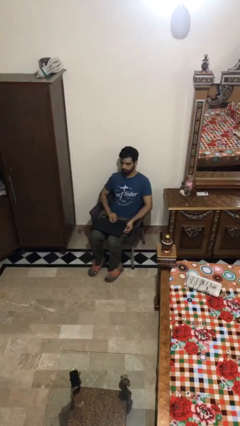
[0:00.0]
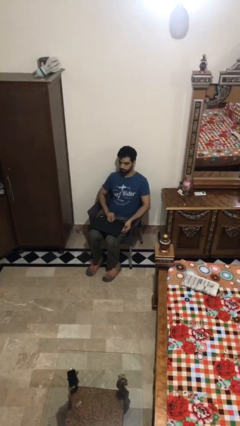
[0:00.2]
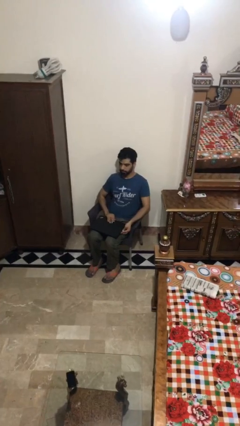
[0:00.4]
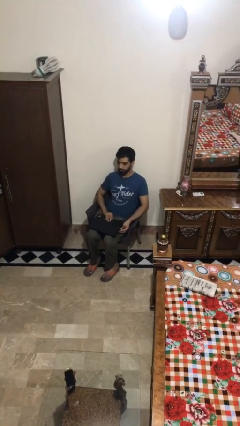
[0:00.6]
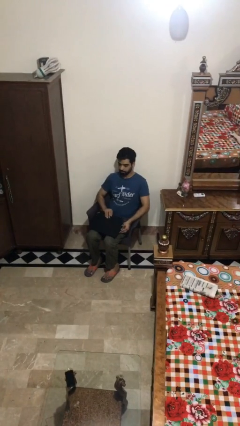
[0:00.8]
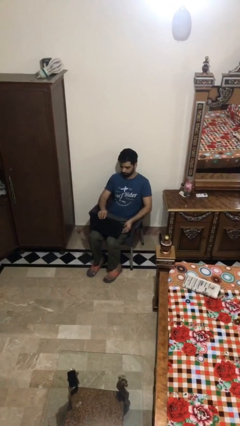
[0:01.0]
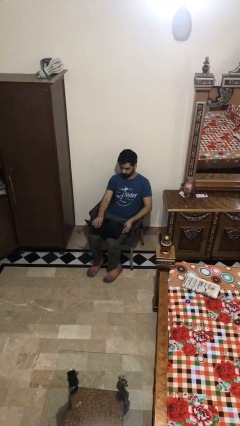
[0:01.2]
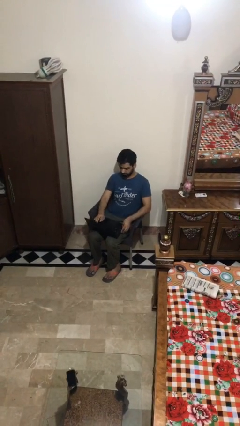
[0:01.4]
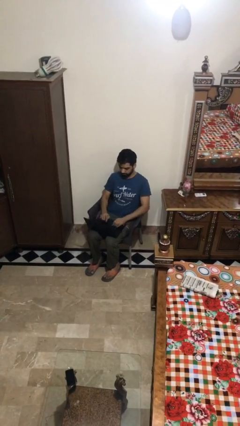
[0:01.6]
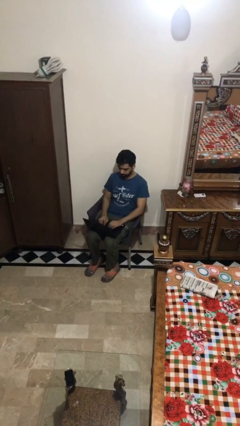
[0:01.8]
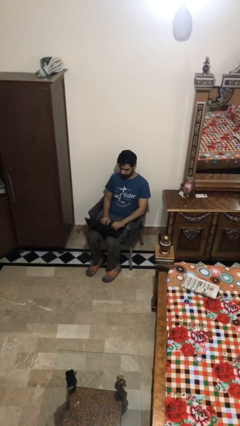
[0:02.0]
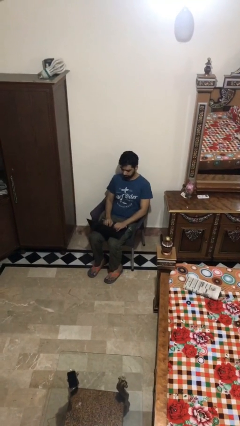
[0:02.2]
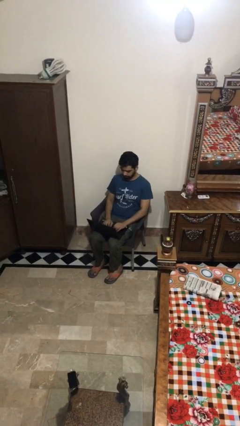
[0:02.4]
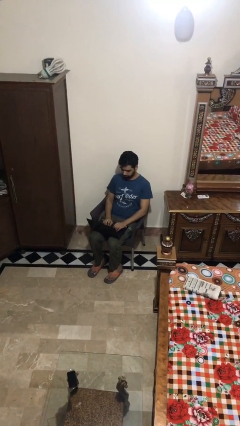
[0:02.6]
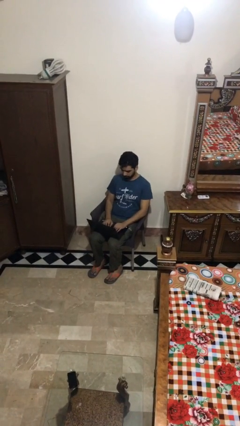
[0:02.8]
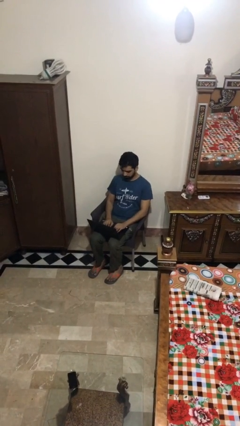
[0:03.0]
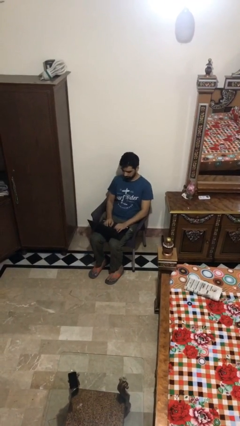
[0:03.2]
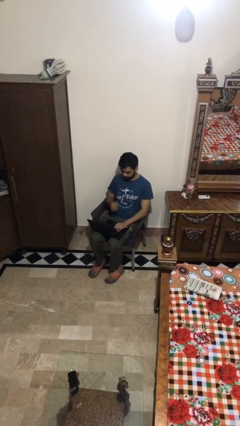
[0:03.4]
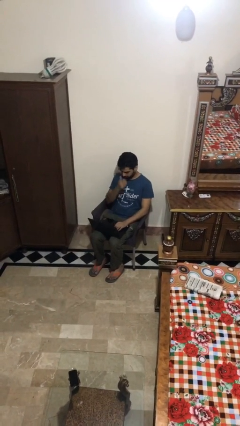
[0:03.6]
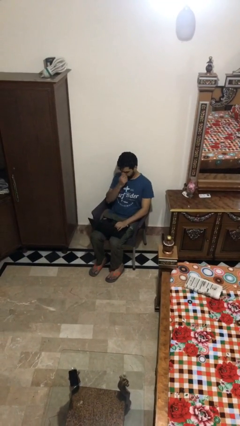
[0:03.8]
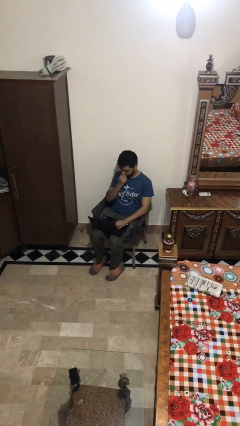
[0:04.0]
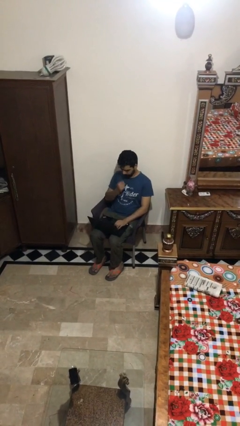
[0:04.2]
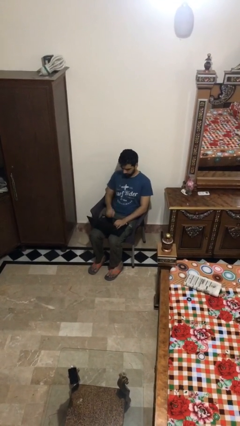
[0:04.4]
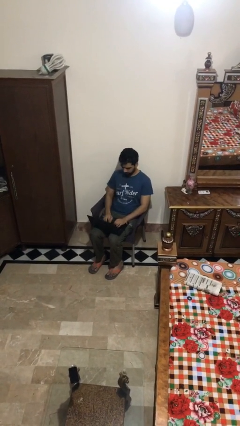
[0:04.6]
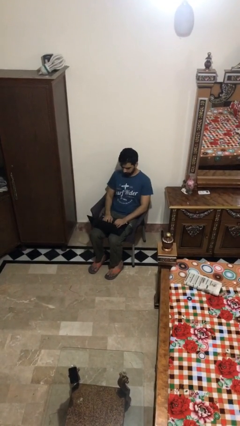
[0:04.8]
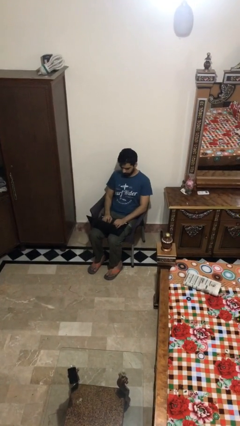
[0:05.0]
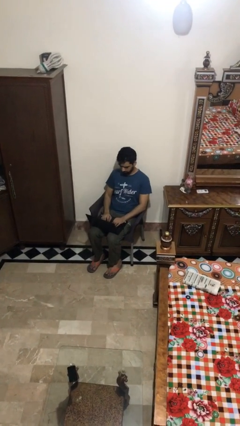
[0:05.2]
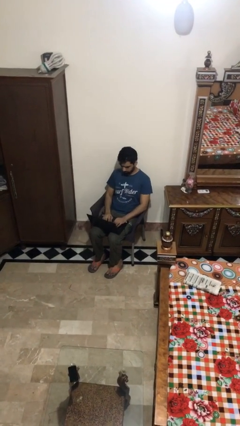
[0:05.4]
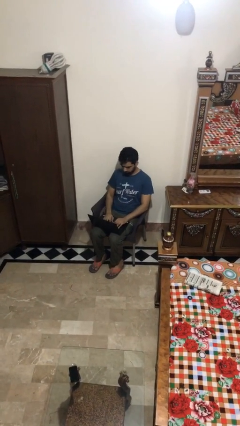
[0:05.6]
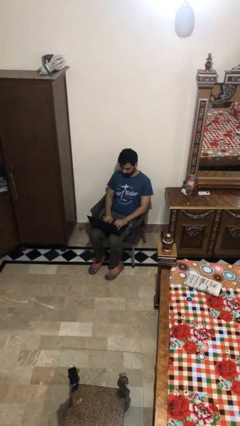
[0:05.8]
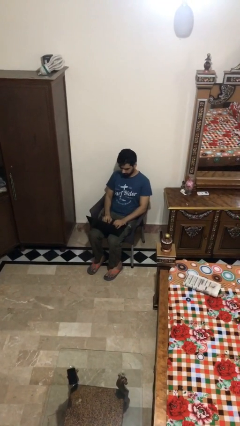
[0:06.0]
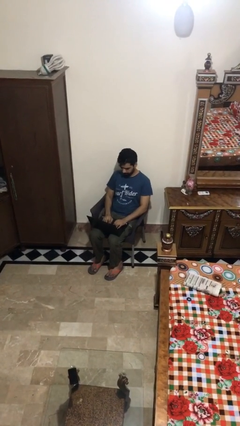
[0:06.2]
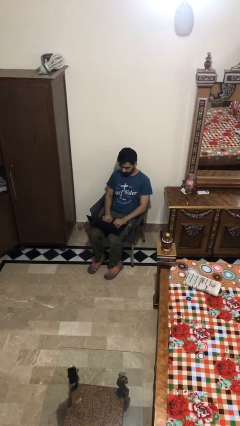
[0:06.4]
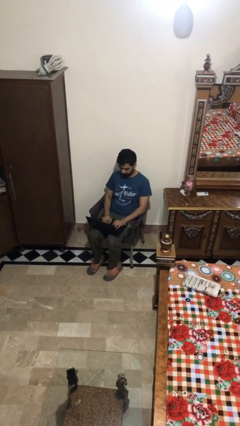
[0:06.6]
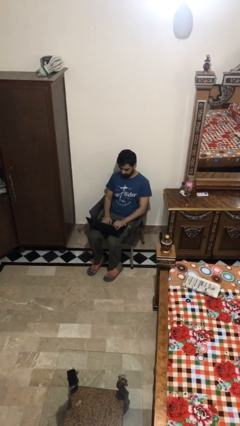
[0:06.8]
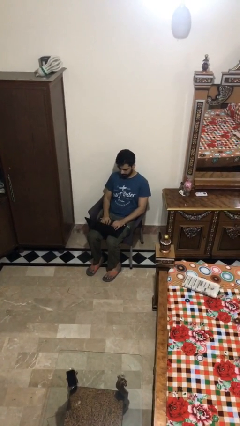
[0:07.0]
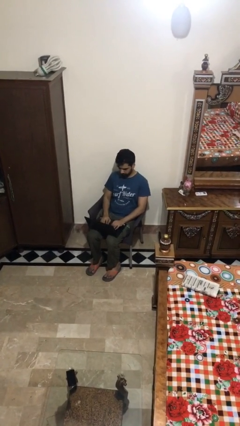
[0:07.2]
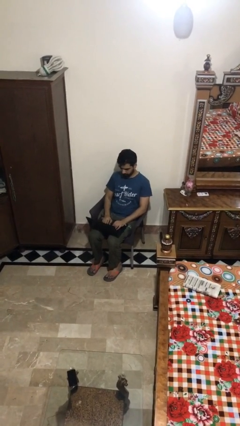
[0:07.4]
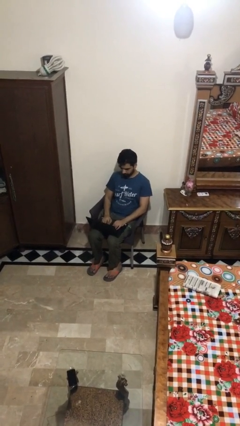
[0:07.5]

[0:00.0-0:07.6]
person interacts with laptop

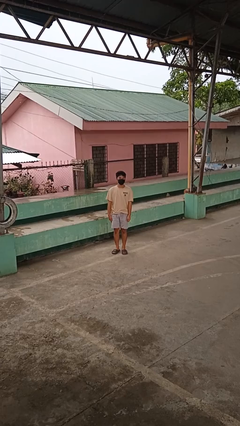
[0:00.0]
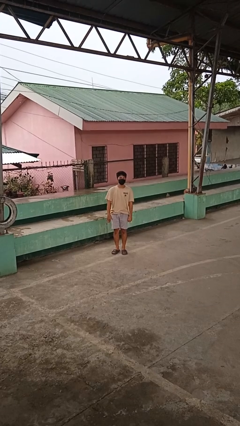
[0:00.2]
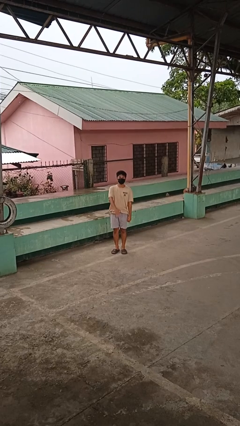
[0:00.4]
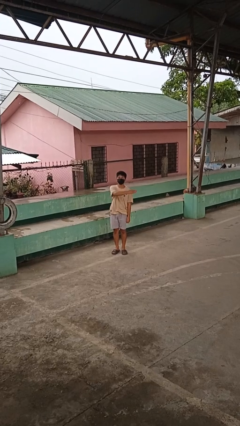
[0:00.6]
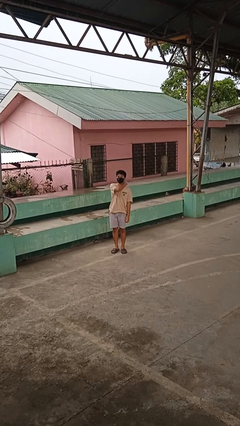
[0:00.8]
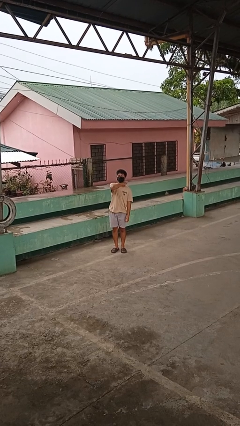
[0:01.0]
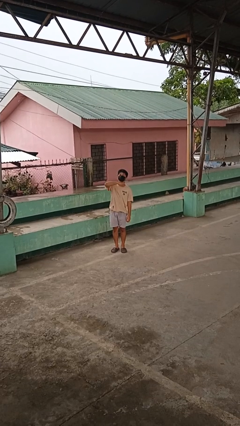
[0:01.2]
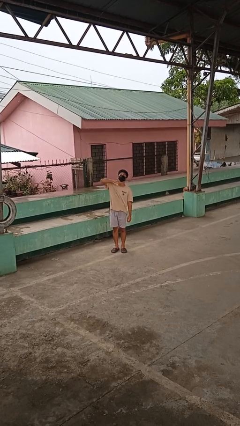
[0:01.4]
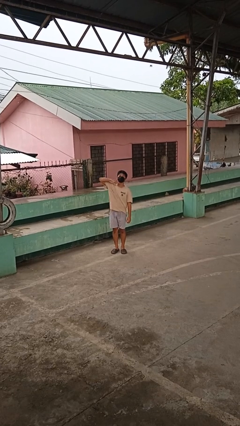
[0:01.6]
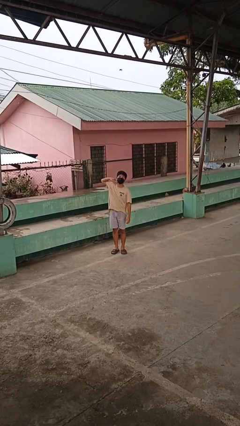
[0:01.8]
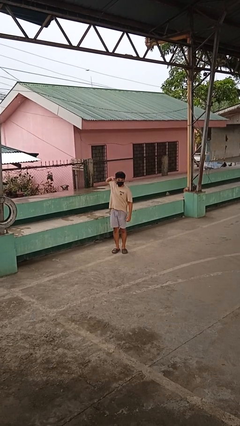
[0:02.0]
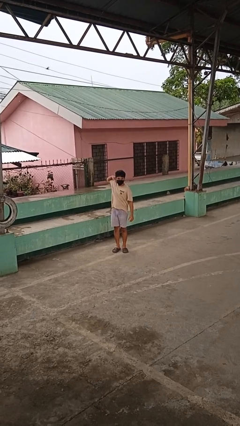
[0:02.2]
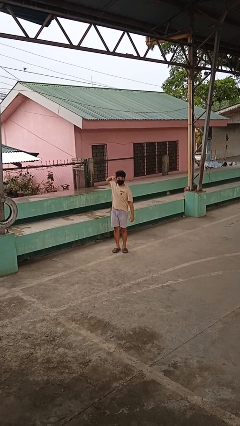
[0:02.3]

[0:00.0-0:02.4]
person gestures cut

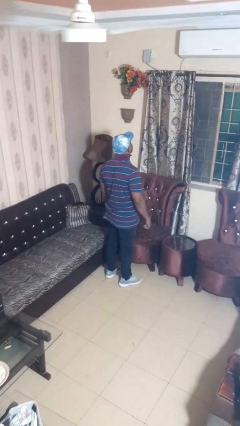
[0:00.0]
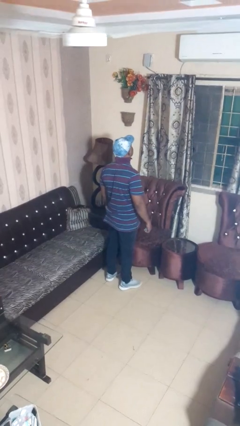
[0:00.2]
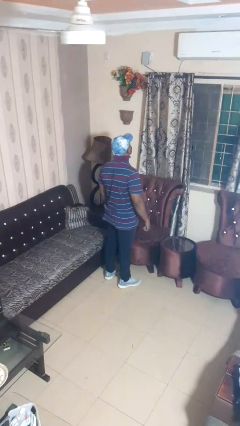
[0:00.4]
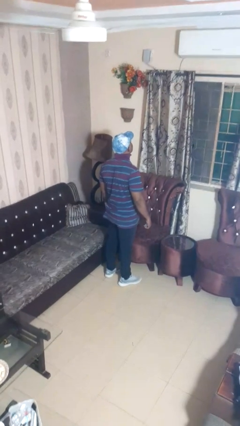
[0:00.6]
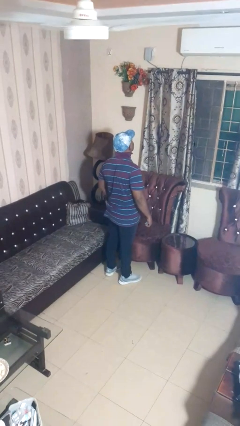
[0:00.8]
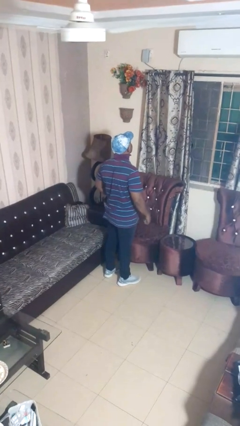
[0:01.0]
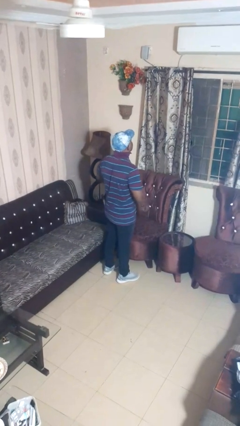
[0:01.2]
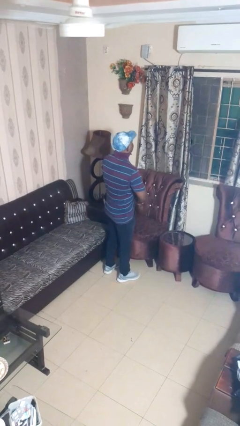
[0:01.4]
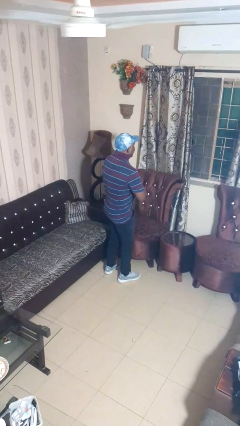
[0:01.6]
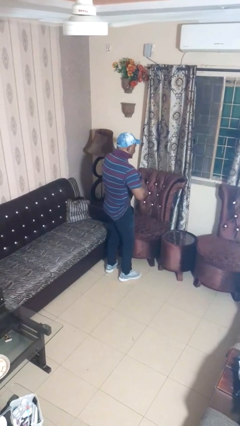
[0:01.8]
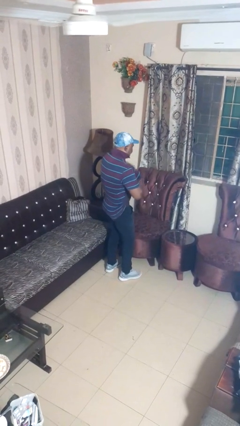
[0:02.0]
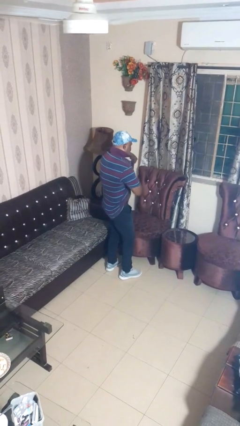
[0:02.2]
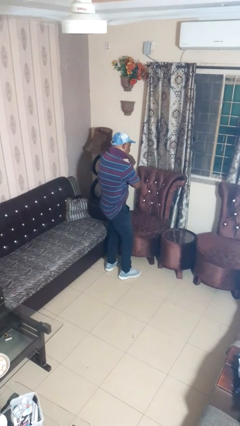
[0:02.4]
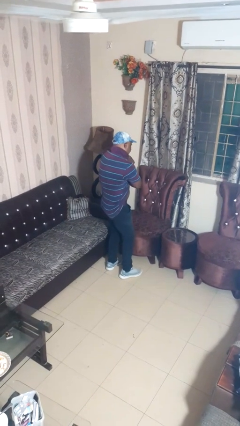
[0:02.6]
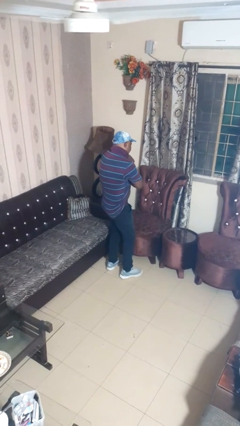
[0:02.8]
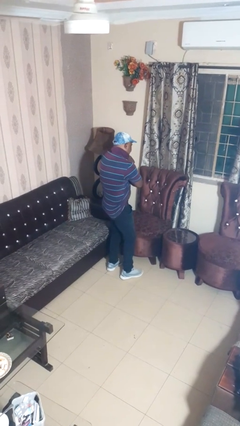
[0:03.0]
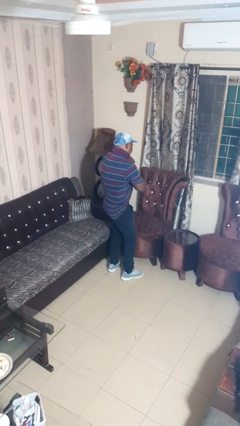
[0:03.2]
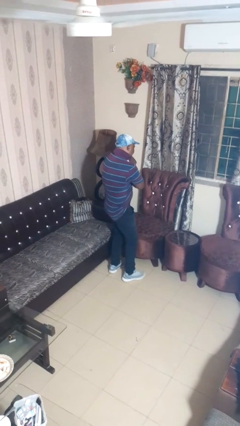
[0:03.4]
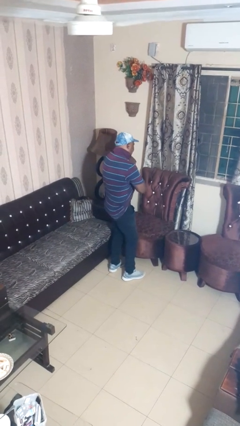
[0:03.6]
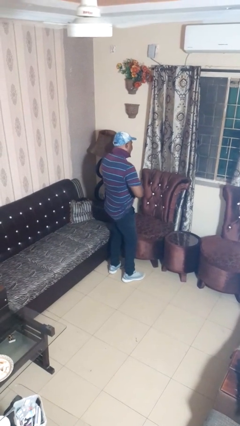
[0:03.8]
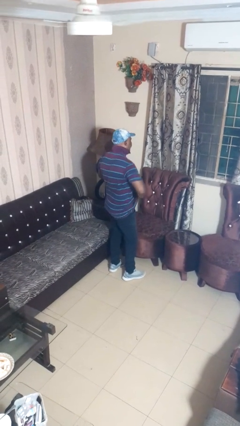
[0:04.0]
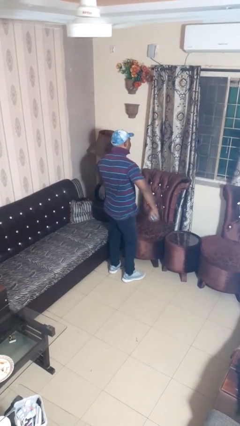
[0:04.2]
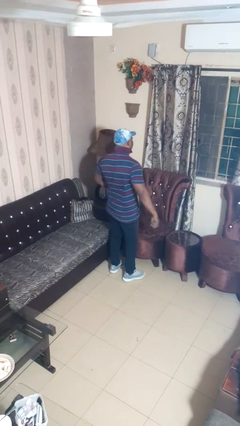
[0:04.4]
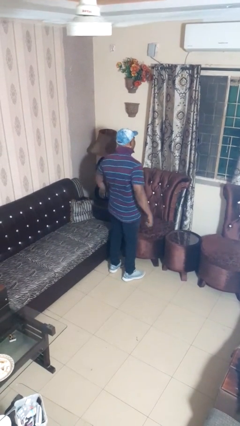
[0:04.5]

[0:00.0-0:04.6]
person applies deodorant

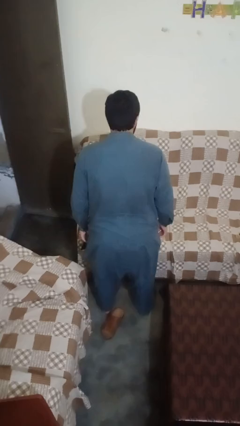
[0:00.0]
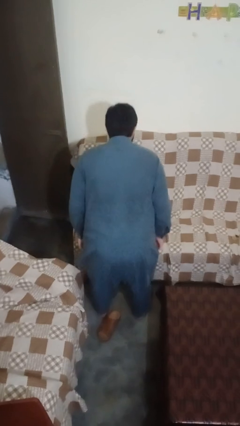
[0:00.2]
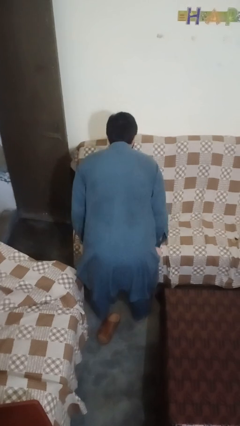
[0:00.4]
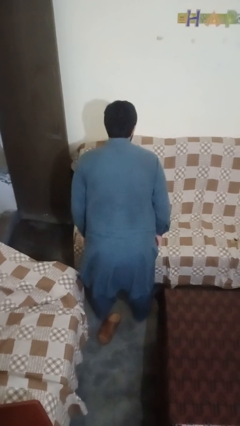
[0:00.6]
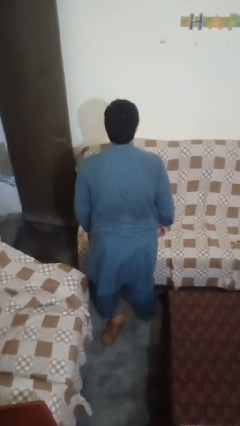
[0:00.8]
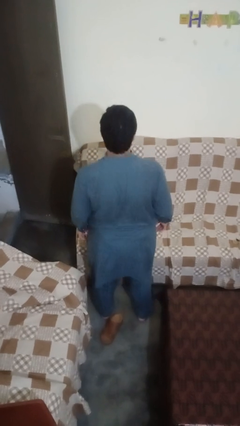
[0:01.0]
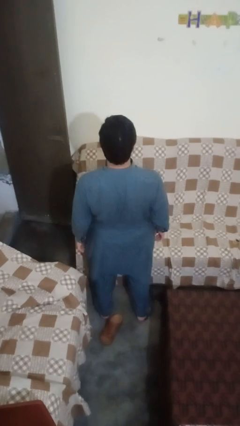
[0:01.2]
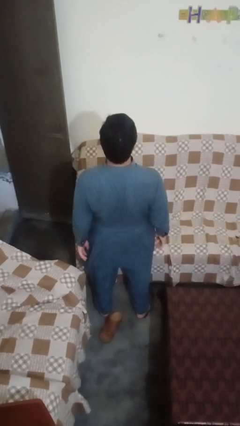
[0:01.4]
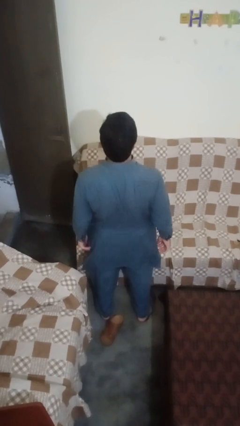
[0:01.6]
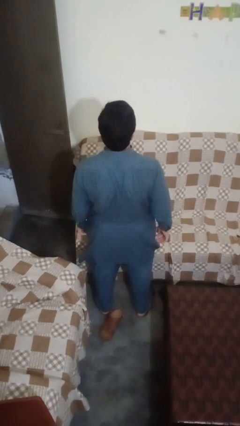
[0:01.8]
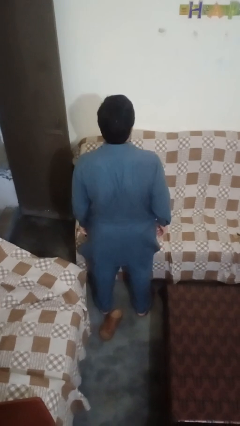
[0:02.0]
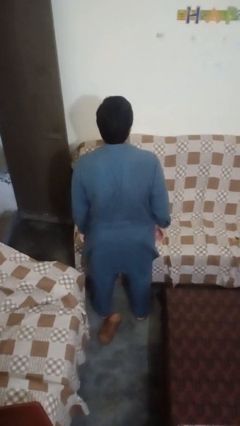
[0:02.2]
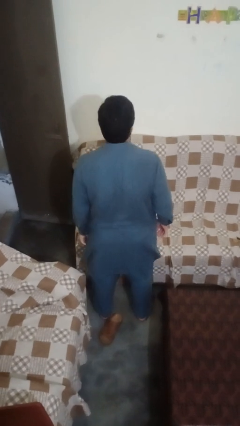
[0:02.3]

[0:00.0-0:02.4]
person wiggles hips

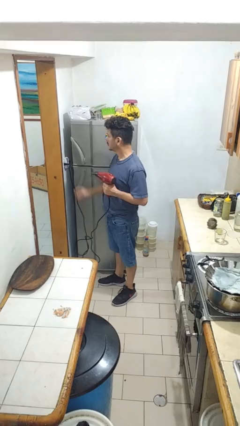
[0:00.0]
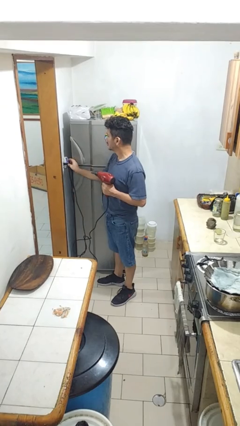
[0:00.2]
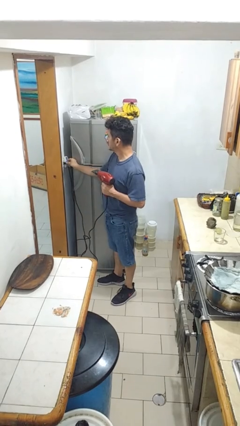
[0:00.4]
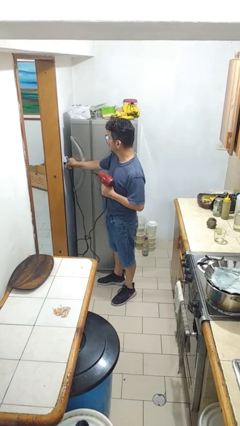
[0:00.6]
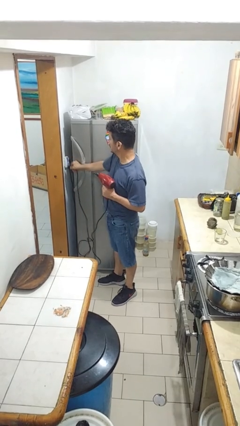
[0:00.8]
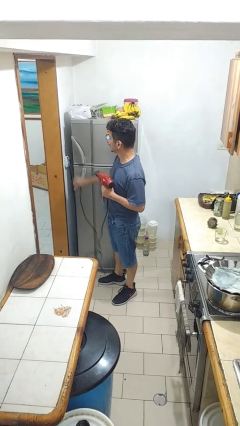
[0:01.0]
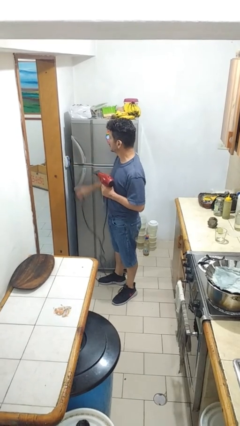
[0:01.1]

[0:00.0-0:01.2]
person unplugs from electrical socket
